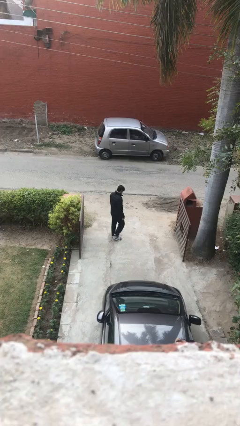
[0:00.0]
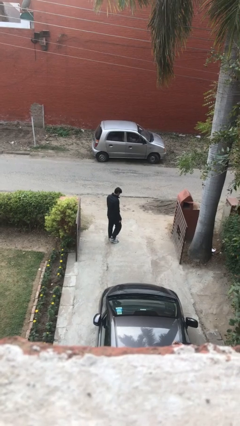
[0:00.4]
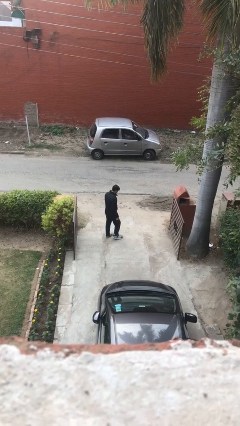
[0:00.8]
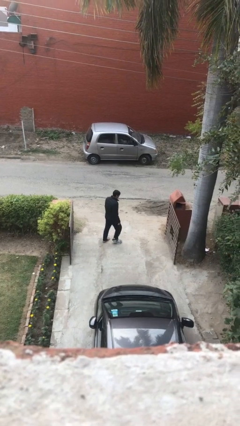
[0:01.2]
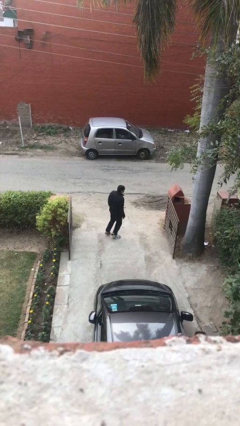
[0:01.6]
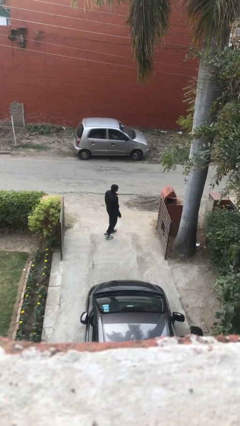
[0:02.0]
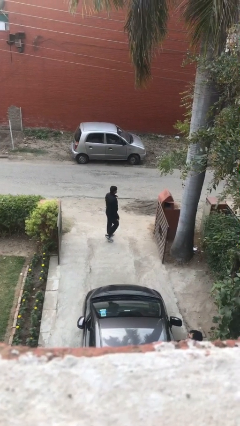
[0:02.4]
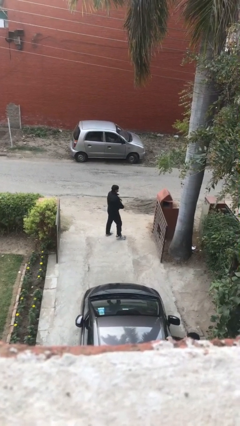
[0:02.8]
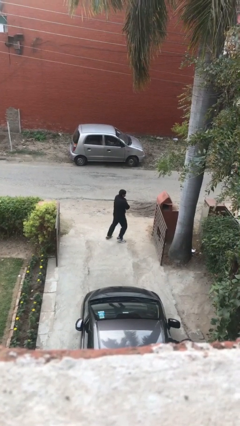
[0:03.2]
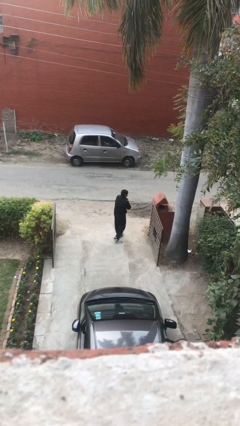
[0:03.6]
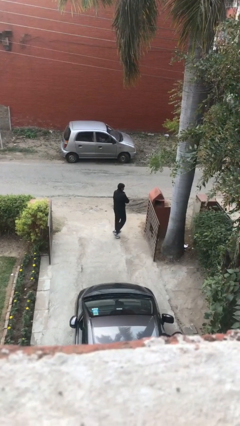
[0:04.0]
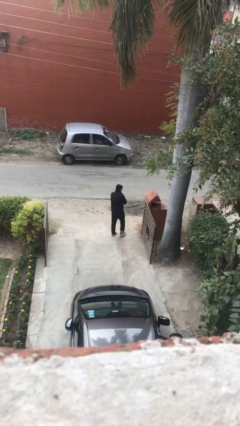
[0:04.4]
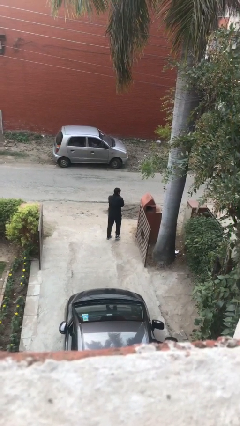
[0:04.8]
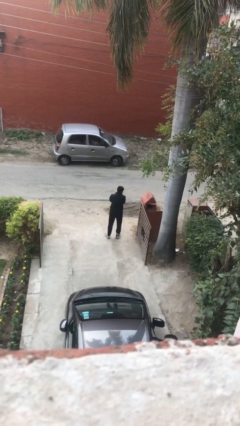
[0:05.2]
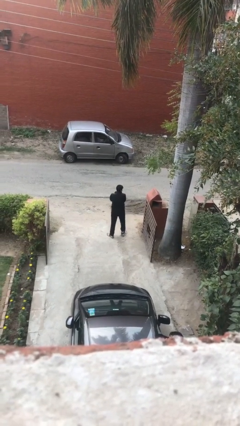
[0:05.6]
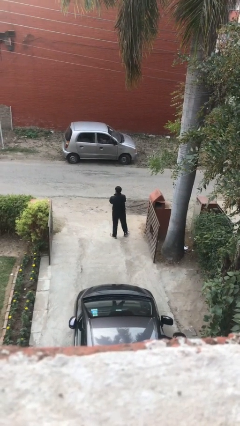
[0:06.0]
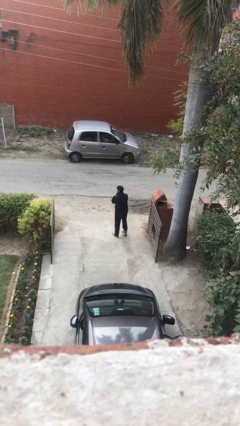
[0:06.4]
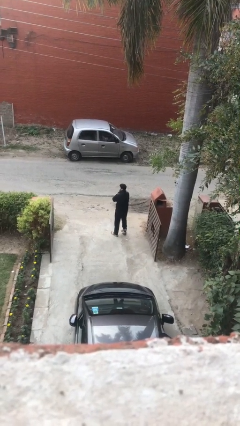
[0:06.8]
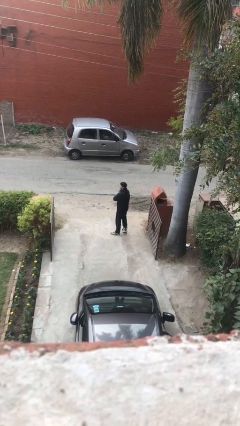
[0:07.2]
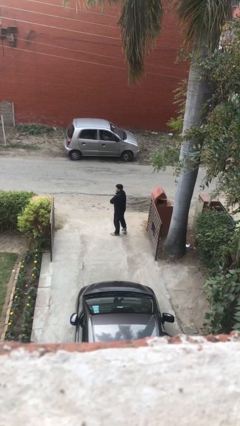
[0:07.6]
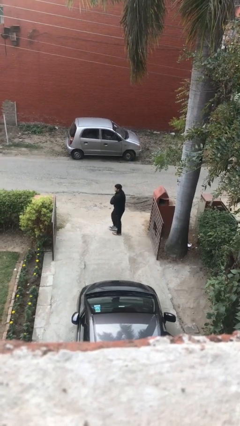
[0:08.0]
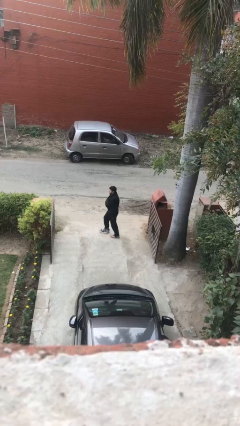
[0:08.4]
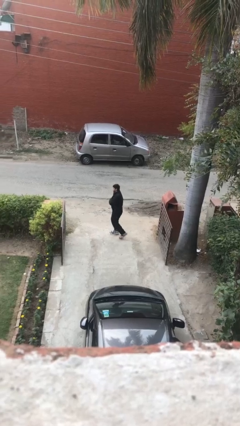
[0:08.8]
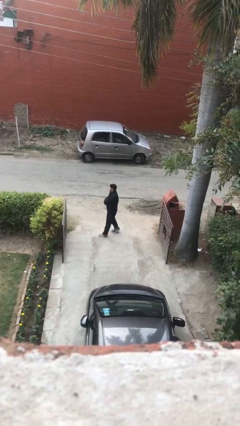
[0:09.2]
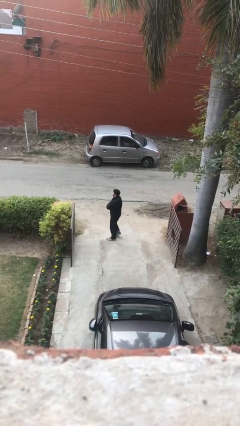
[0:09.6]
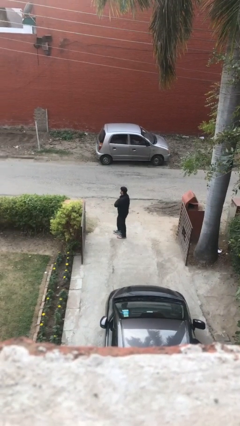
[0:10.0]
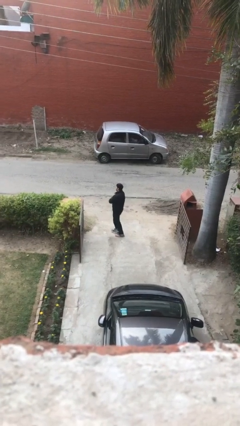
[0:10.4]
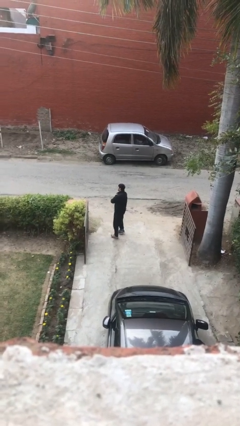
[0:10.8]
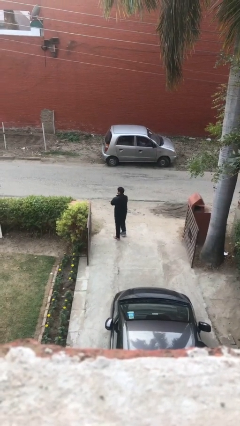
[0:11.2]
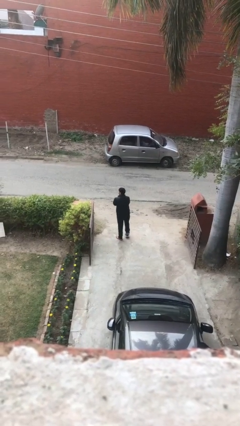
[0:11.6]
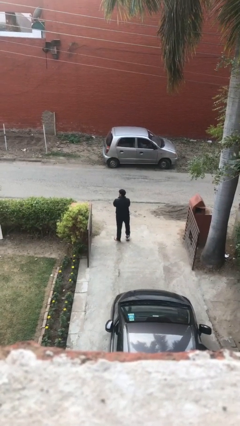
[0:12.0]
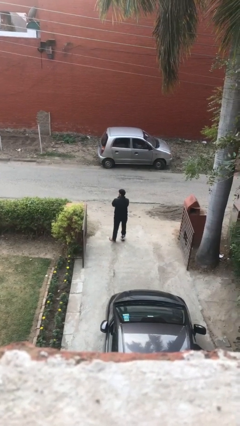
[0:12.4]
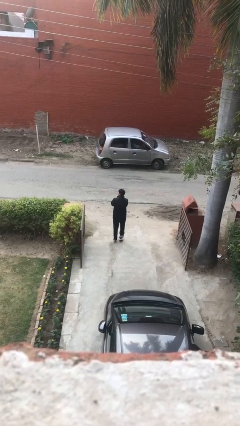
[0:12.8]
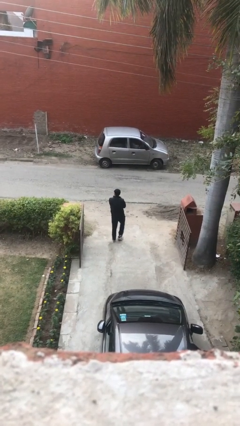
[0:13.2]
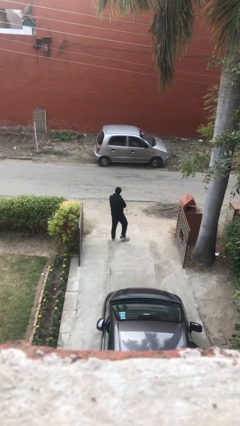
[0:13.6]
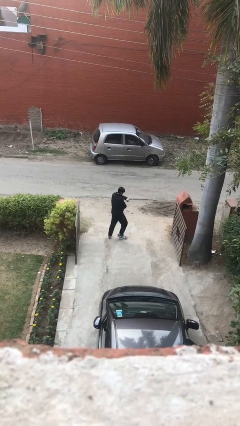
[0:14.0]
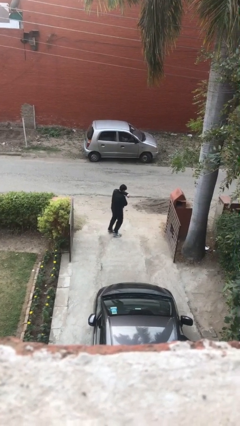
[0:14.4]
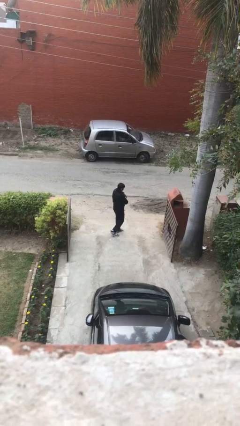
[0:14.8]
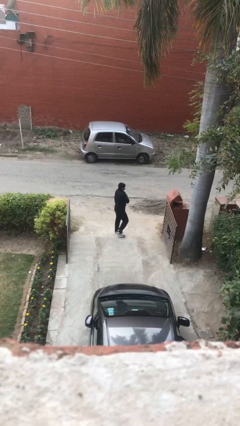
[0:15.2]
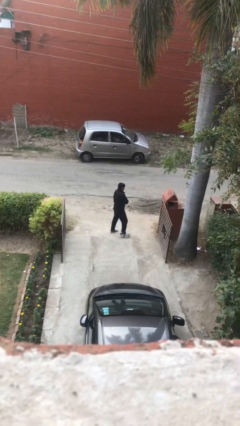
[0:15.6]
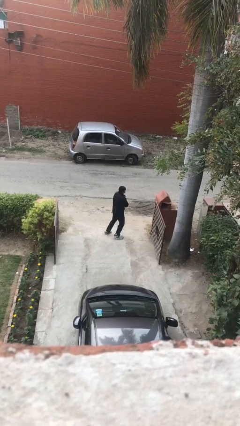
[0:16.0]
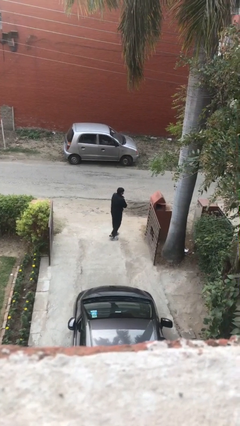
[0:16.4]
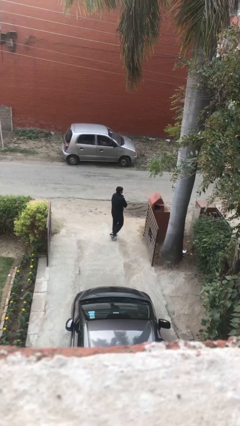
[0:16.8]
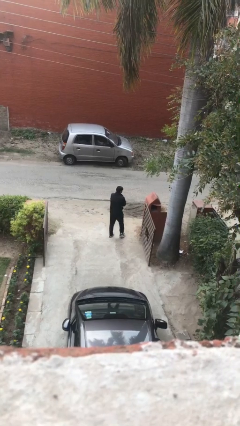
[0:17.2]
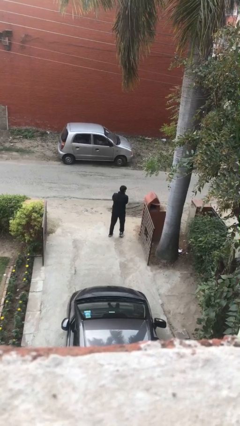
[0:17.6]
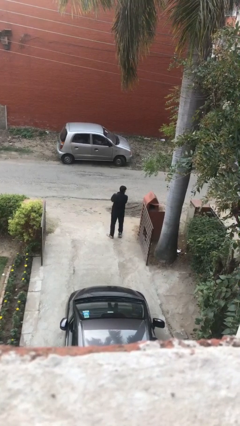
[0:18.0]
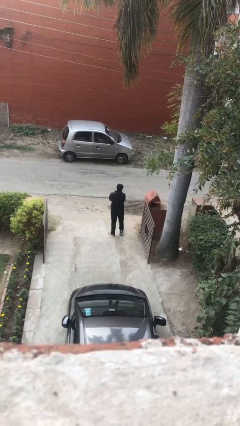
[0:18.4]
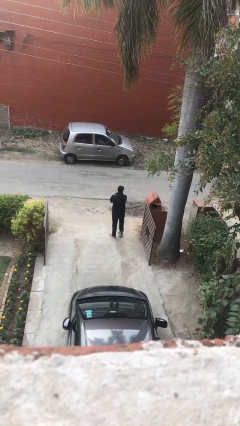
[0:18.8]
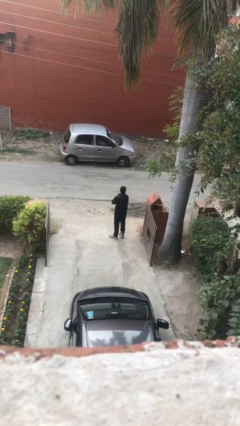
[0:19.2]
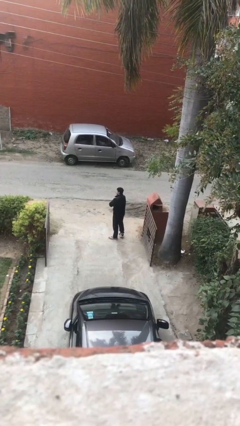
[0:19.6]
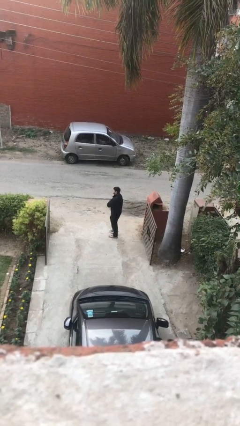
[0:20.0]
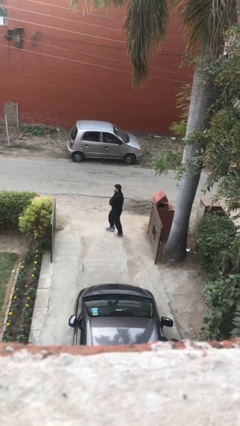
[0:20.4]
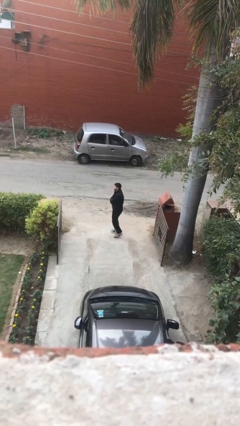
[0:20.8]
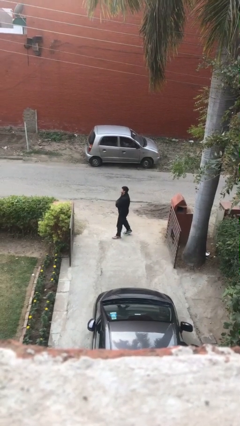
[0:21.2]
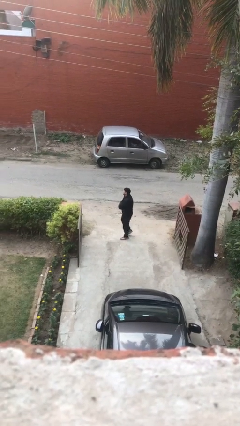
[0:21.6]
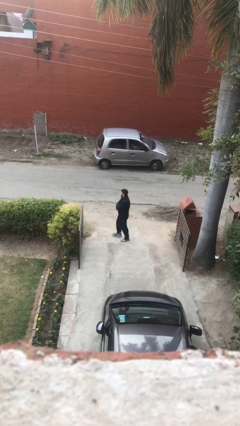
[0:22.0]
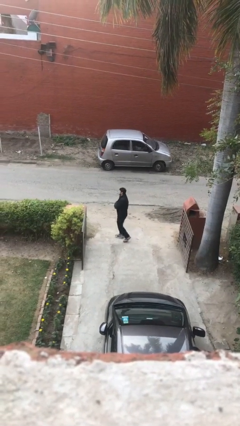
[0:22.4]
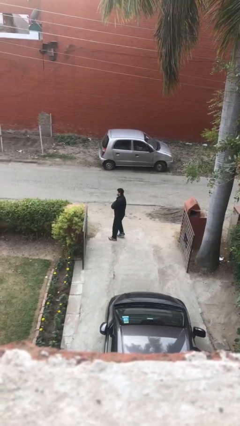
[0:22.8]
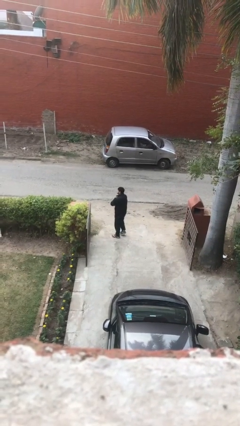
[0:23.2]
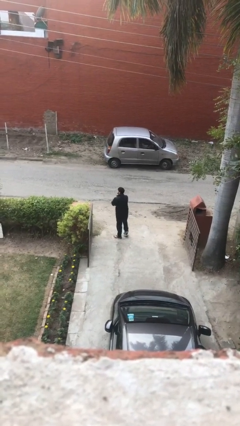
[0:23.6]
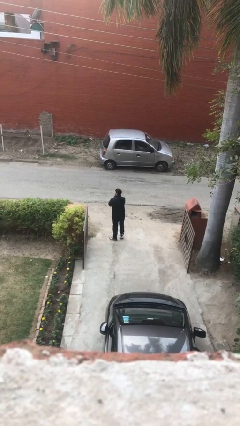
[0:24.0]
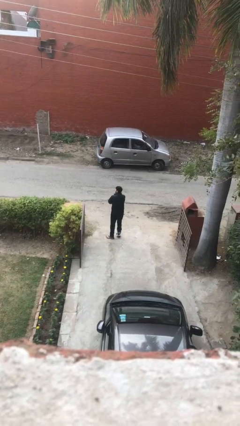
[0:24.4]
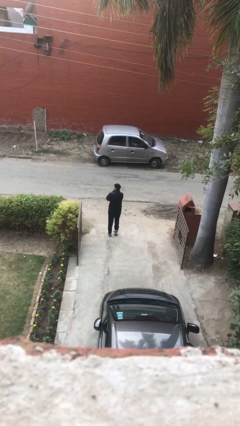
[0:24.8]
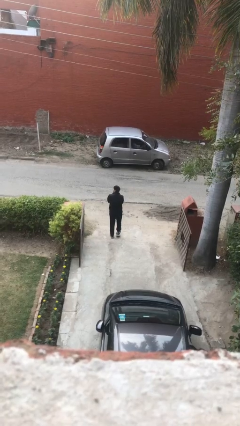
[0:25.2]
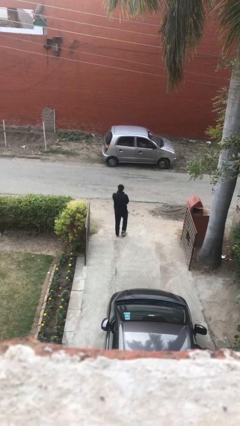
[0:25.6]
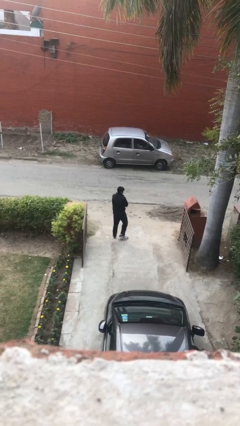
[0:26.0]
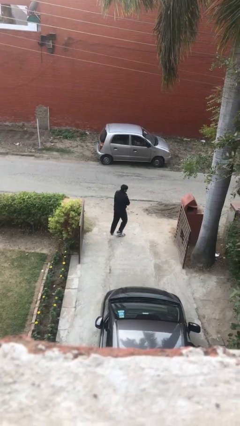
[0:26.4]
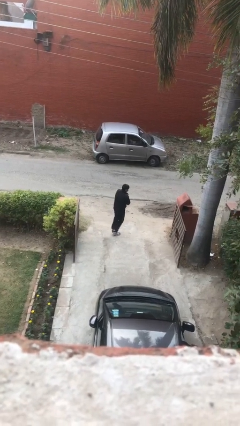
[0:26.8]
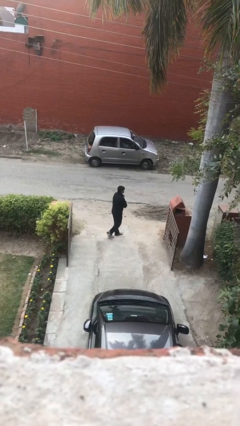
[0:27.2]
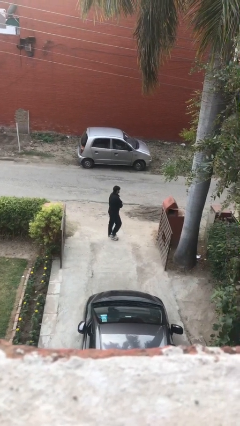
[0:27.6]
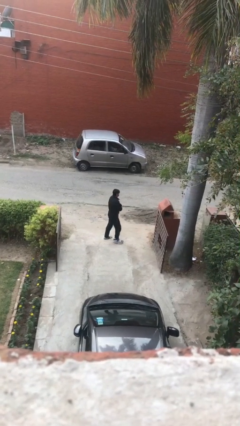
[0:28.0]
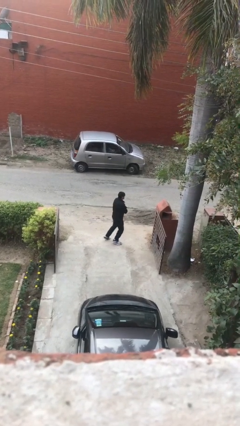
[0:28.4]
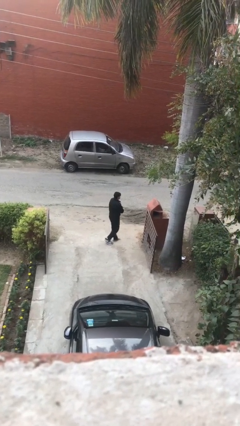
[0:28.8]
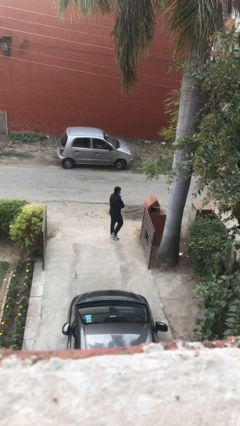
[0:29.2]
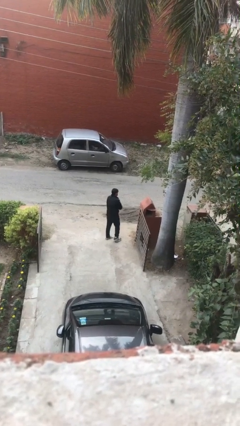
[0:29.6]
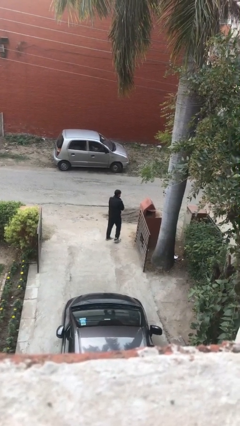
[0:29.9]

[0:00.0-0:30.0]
person walks

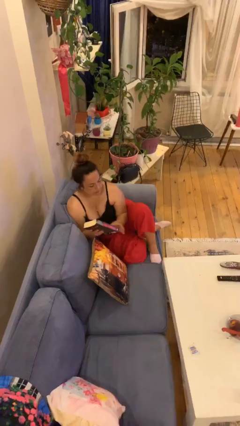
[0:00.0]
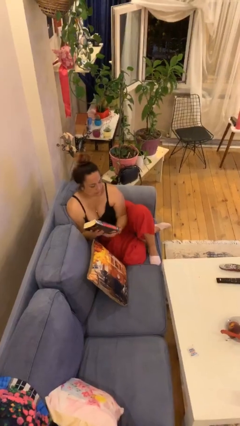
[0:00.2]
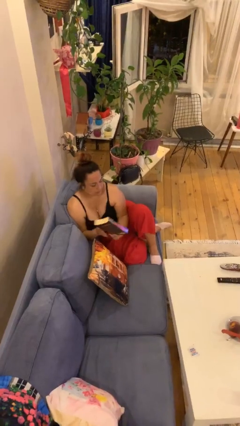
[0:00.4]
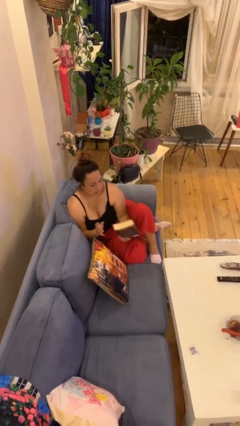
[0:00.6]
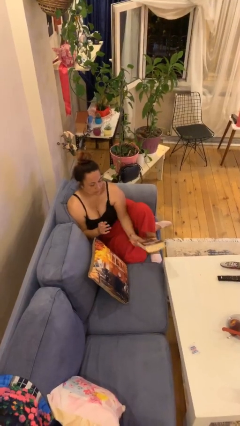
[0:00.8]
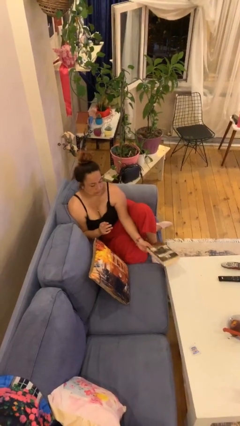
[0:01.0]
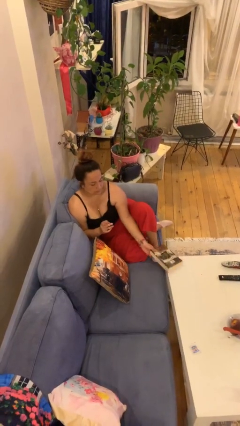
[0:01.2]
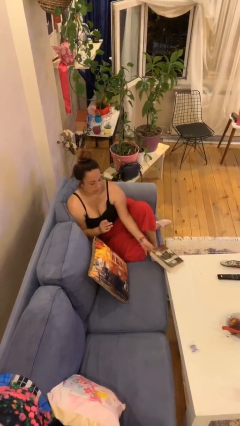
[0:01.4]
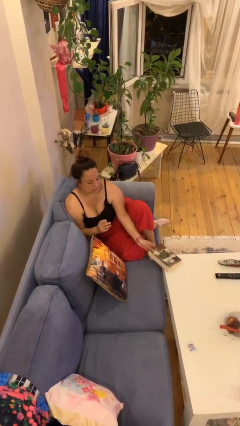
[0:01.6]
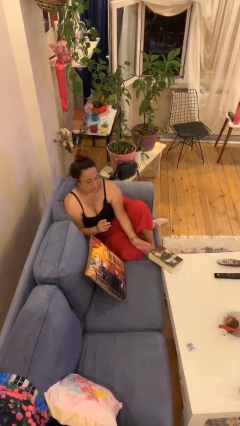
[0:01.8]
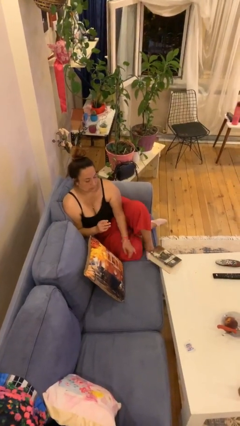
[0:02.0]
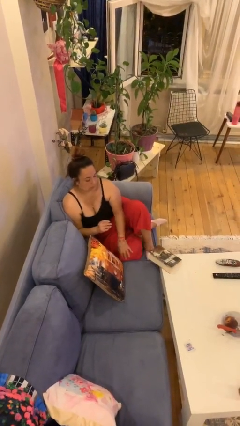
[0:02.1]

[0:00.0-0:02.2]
person puts down object on table

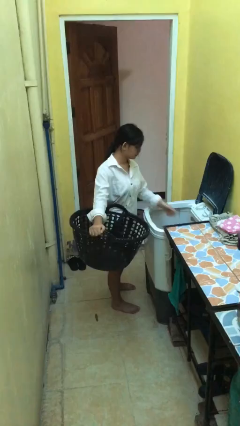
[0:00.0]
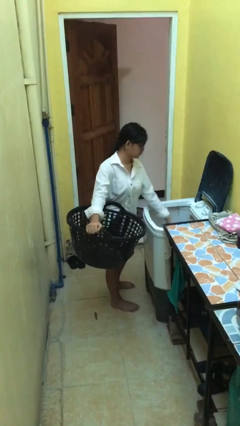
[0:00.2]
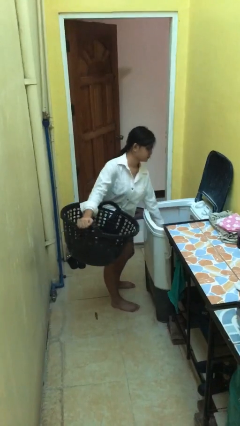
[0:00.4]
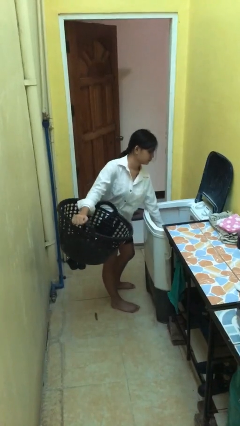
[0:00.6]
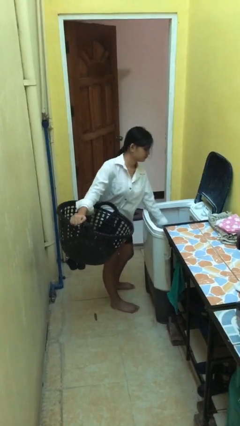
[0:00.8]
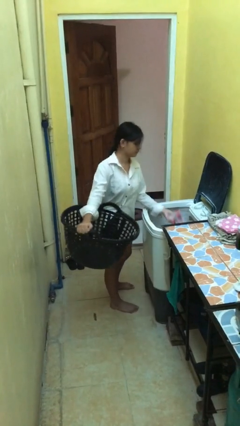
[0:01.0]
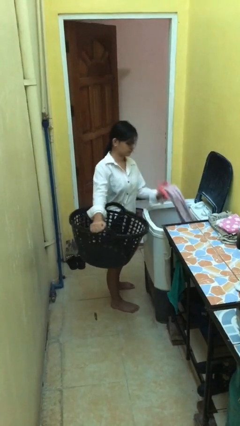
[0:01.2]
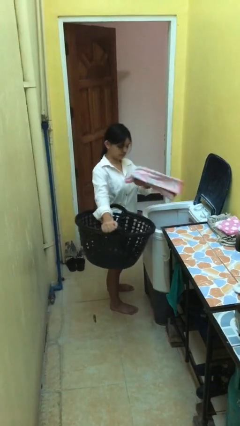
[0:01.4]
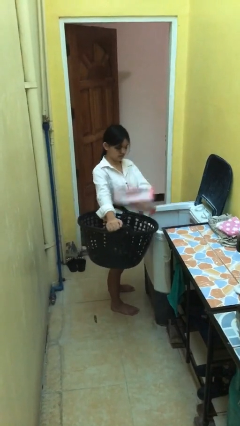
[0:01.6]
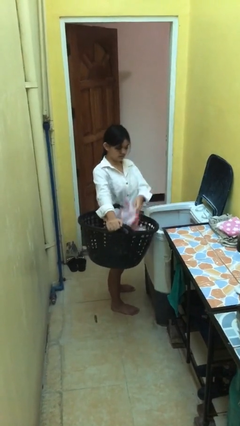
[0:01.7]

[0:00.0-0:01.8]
person loads clotheswasher
